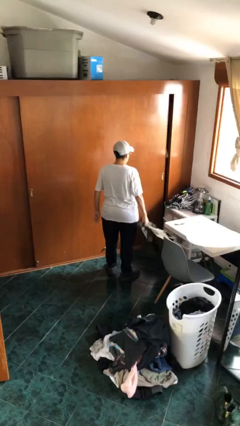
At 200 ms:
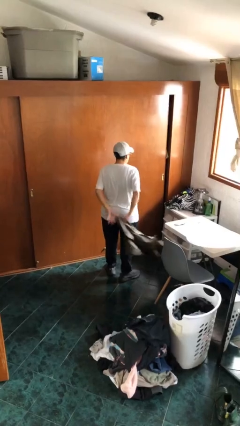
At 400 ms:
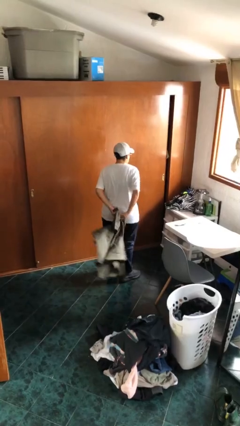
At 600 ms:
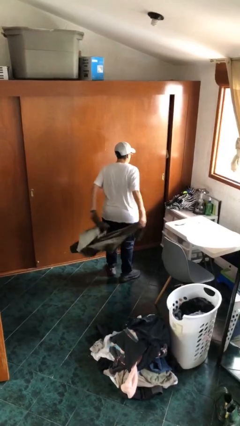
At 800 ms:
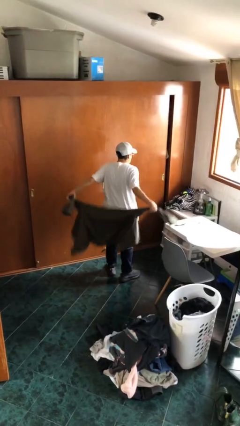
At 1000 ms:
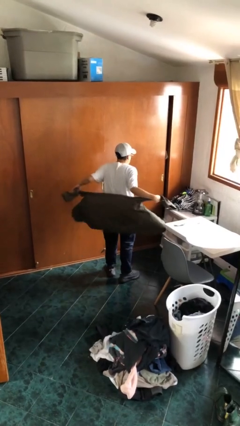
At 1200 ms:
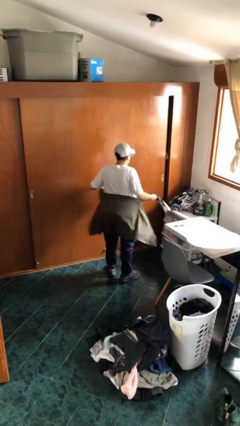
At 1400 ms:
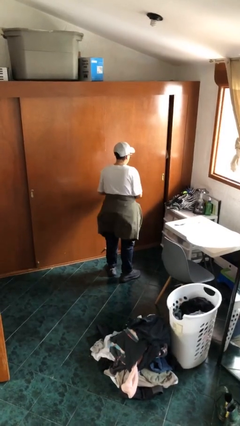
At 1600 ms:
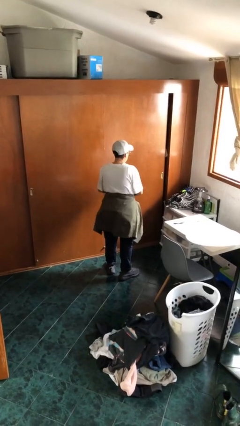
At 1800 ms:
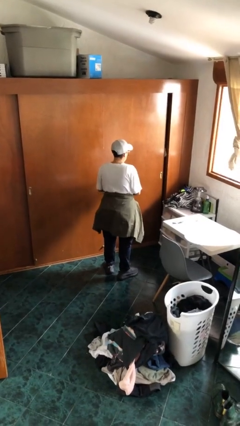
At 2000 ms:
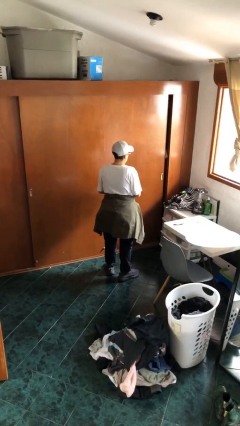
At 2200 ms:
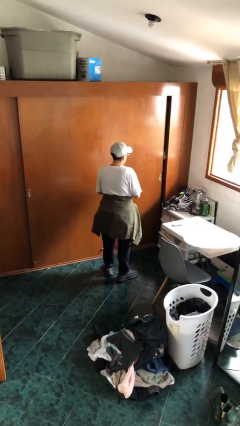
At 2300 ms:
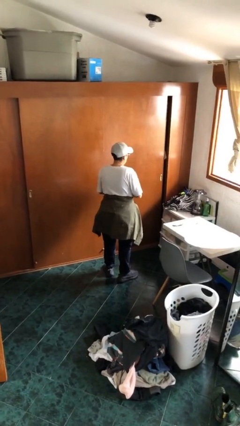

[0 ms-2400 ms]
person ties jacket around waist

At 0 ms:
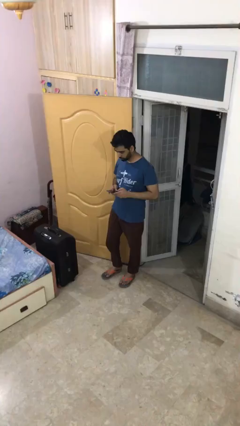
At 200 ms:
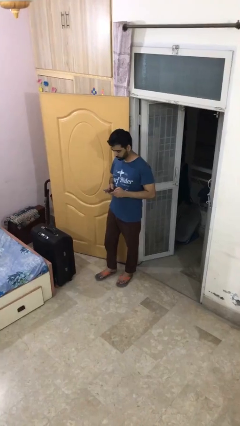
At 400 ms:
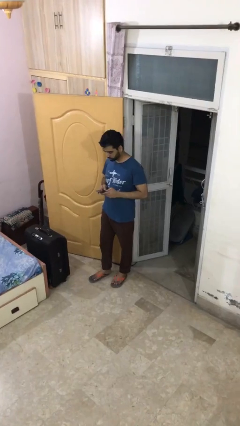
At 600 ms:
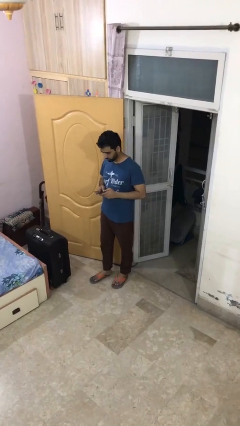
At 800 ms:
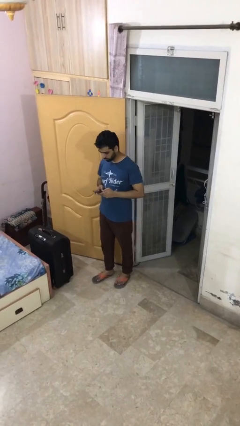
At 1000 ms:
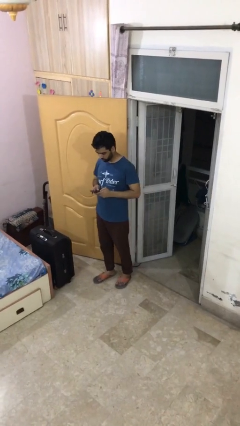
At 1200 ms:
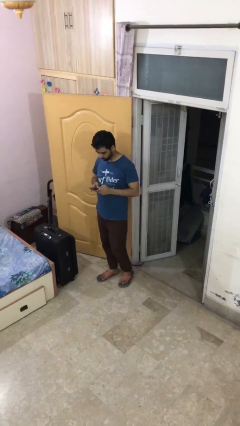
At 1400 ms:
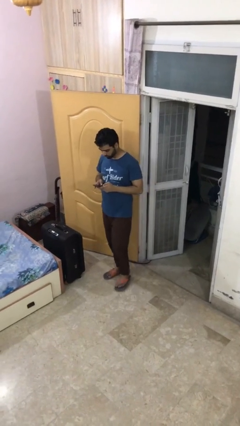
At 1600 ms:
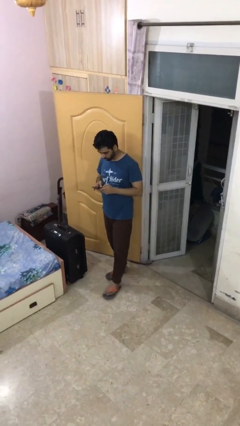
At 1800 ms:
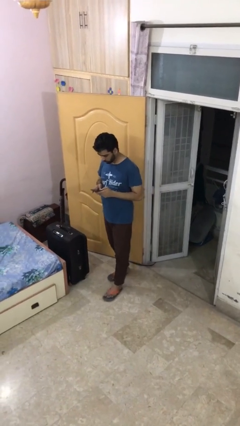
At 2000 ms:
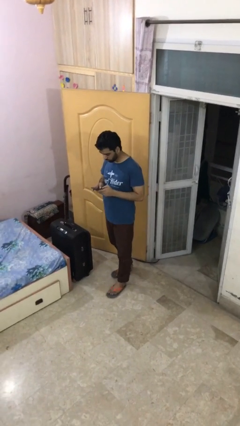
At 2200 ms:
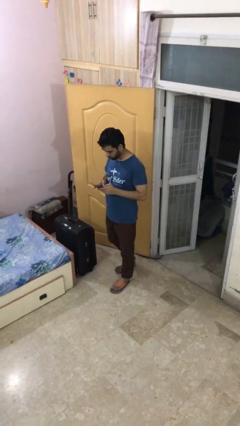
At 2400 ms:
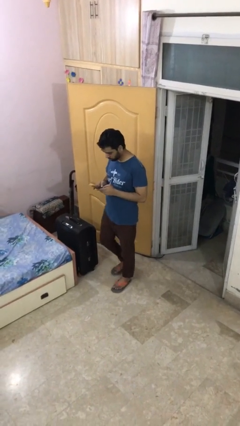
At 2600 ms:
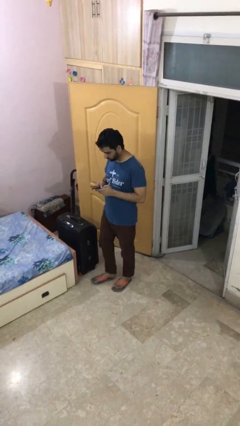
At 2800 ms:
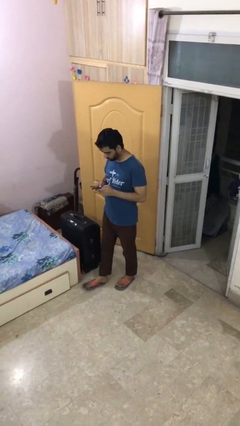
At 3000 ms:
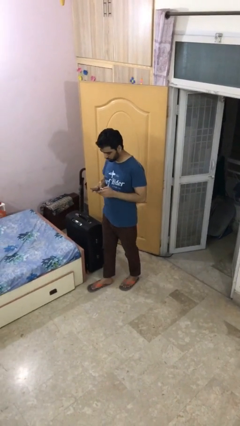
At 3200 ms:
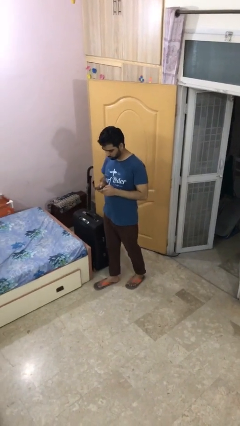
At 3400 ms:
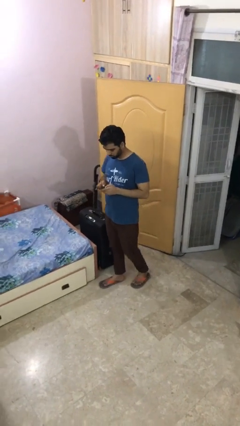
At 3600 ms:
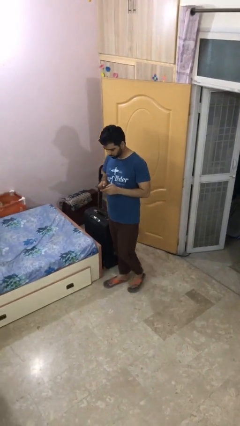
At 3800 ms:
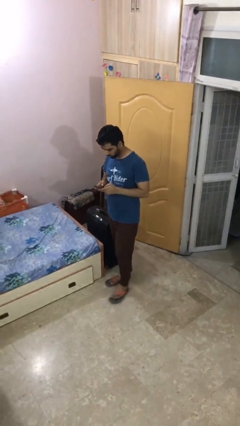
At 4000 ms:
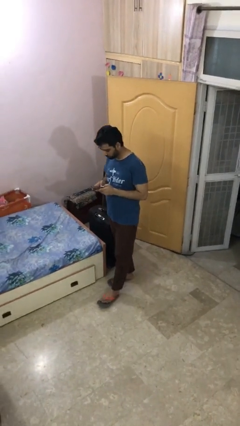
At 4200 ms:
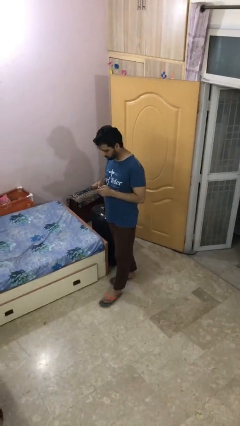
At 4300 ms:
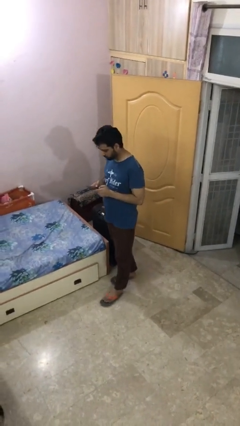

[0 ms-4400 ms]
person texts on phone

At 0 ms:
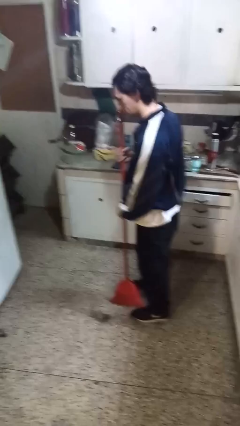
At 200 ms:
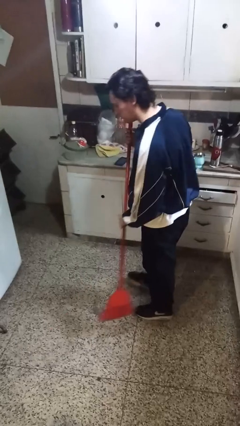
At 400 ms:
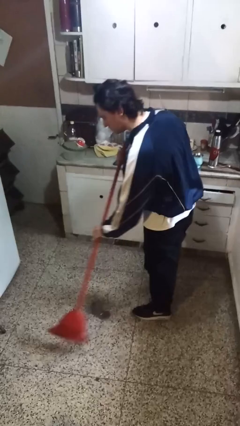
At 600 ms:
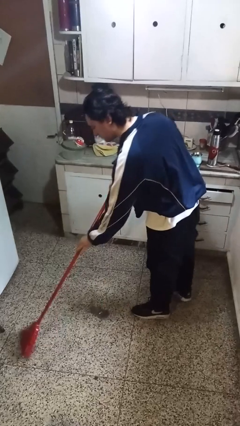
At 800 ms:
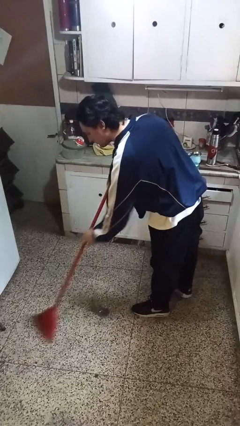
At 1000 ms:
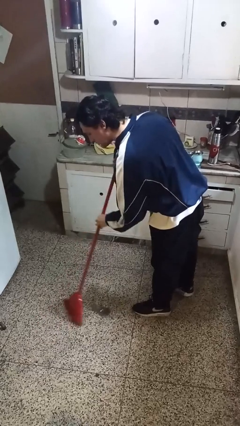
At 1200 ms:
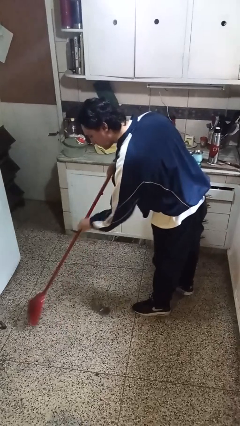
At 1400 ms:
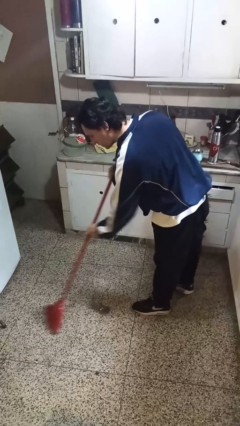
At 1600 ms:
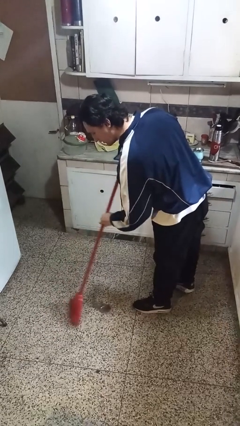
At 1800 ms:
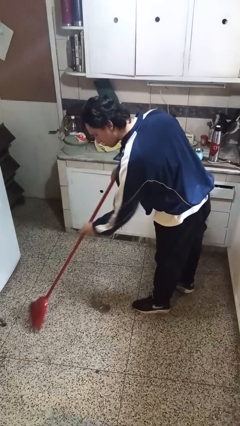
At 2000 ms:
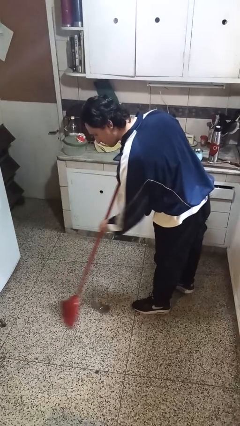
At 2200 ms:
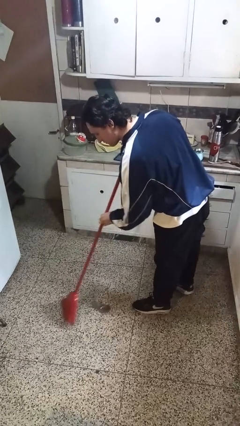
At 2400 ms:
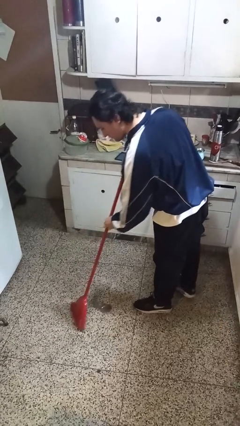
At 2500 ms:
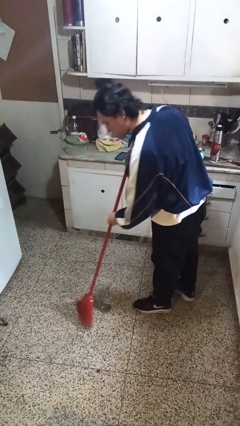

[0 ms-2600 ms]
person sweeps floor

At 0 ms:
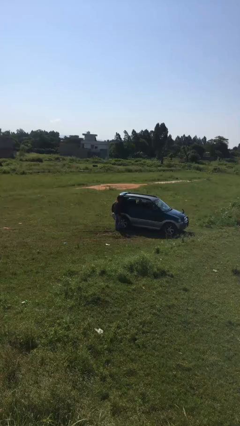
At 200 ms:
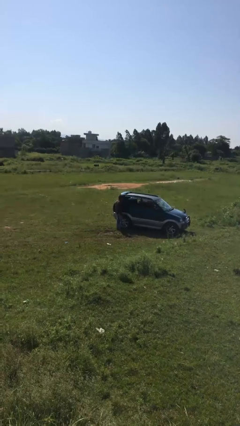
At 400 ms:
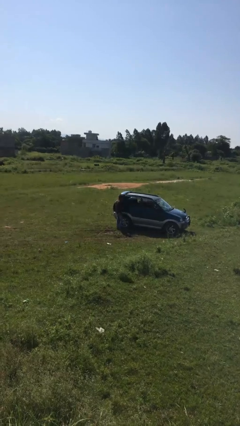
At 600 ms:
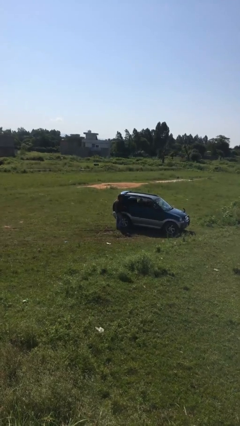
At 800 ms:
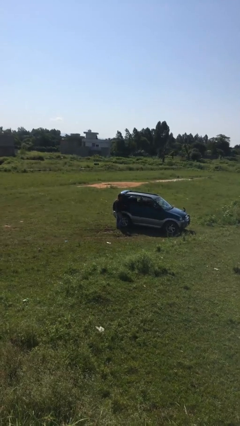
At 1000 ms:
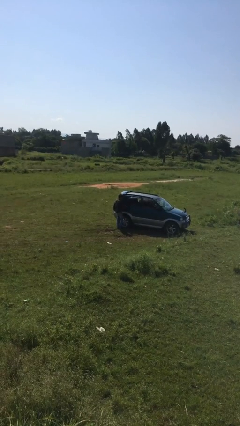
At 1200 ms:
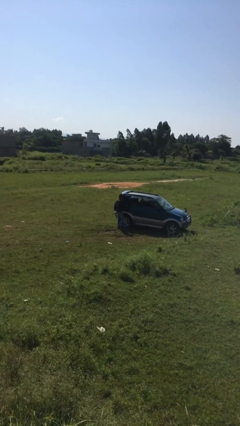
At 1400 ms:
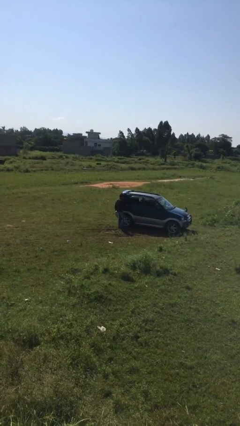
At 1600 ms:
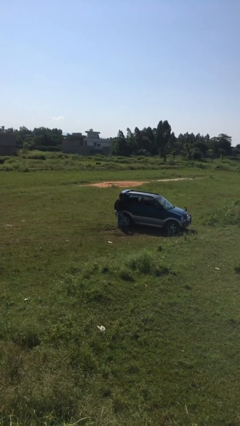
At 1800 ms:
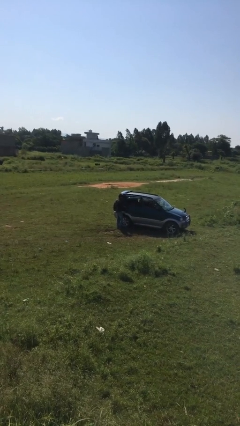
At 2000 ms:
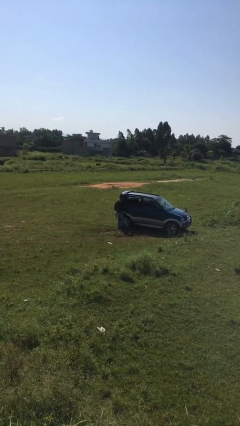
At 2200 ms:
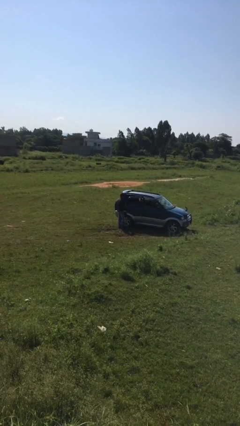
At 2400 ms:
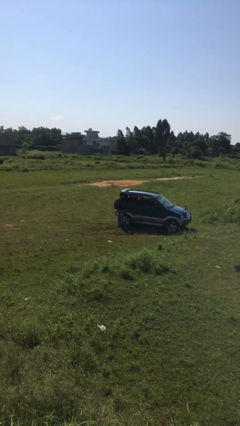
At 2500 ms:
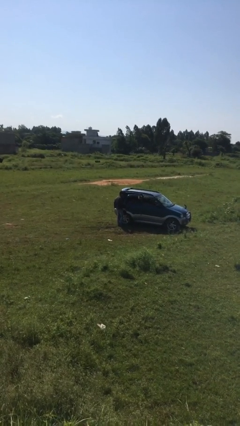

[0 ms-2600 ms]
person opens car door

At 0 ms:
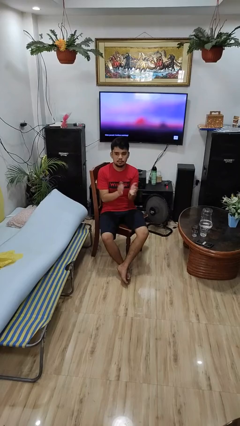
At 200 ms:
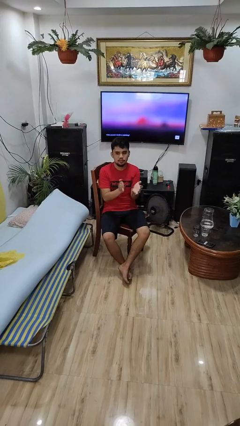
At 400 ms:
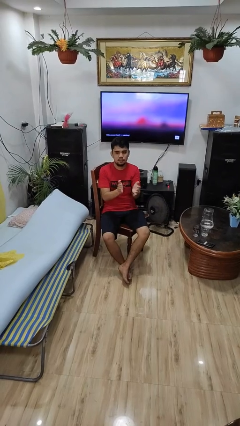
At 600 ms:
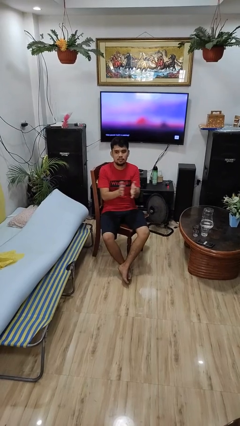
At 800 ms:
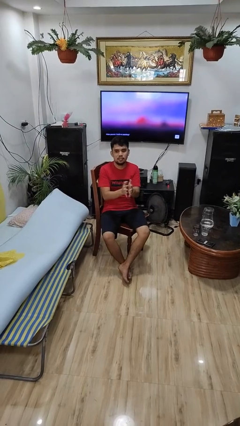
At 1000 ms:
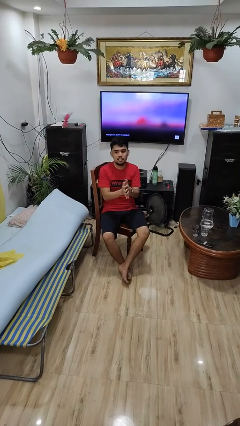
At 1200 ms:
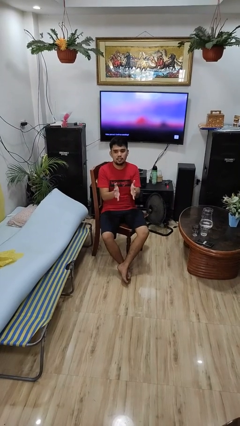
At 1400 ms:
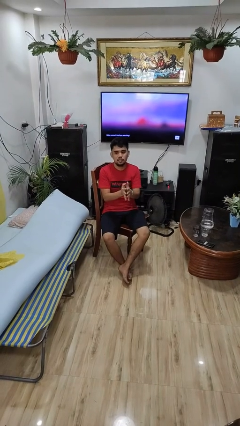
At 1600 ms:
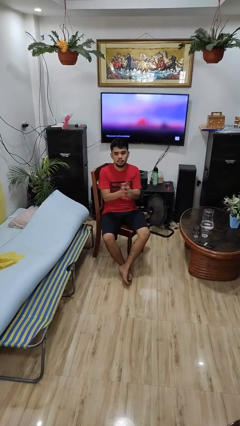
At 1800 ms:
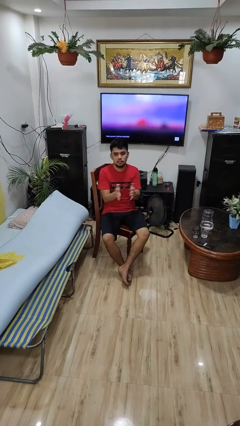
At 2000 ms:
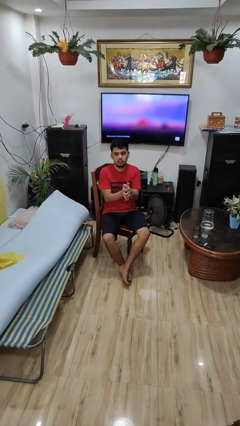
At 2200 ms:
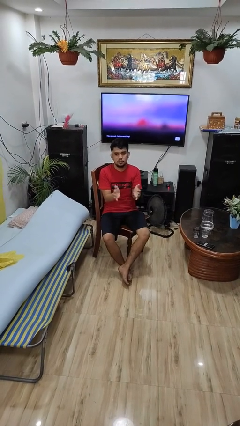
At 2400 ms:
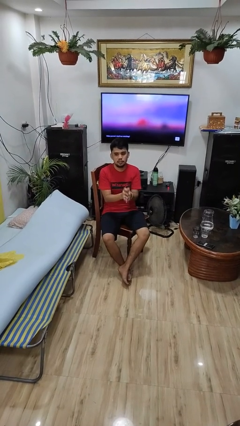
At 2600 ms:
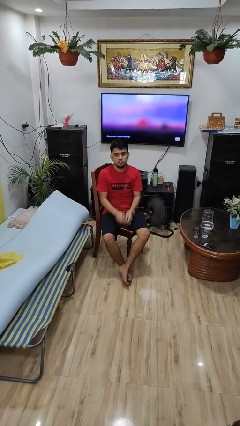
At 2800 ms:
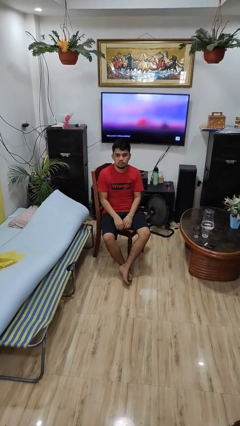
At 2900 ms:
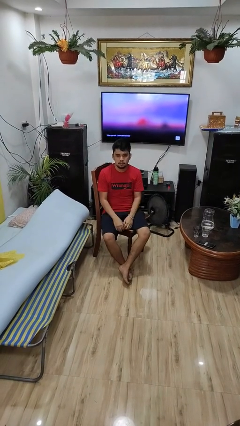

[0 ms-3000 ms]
person claps hands

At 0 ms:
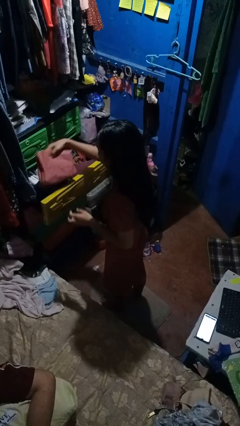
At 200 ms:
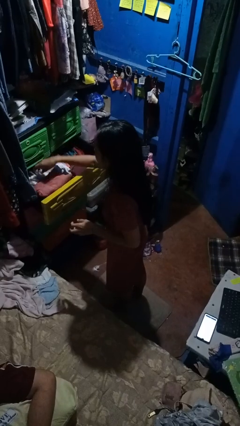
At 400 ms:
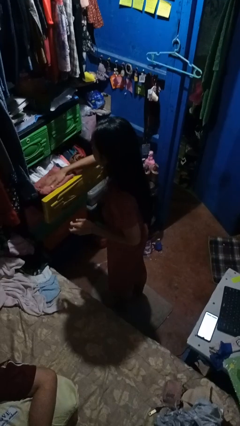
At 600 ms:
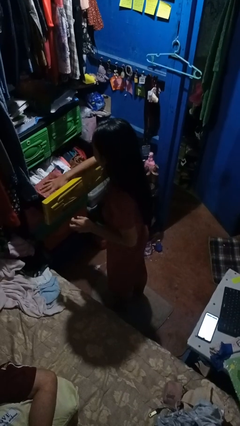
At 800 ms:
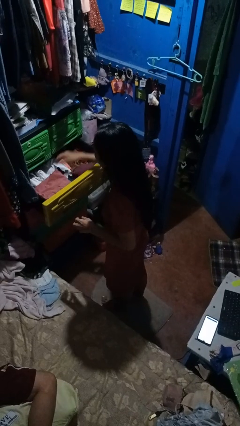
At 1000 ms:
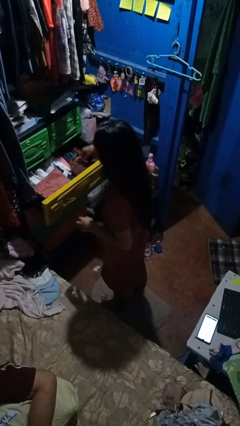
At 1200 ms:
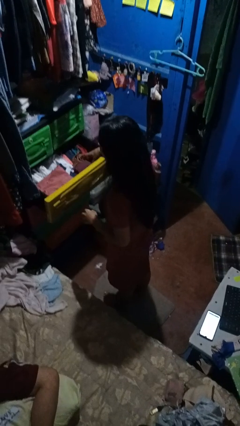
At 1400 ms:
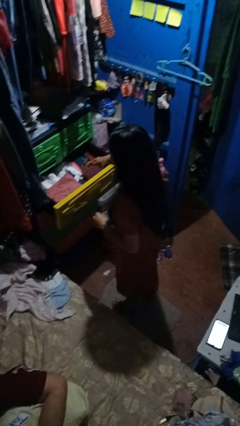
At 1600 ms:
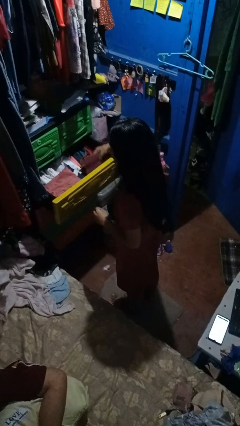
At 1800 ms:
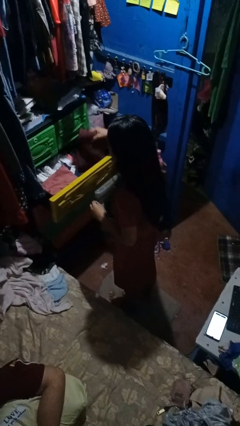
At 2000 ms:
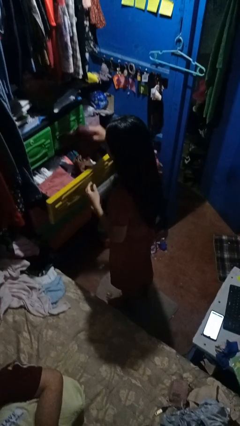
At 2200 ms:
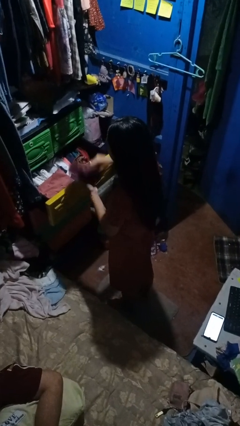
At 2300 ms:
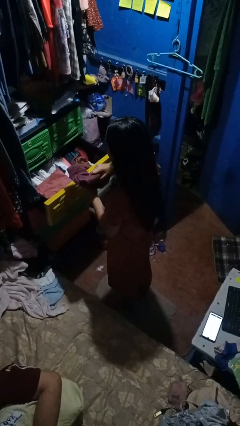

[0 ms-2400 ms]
person puts clothes into dresser
